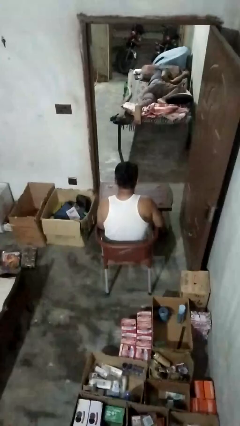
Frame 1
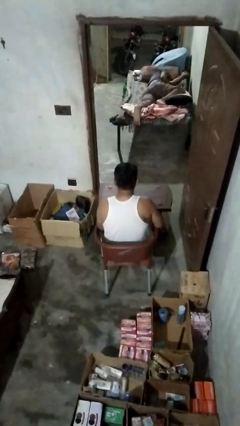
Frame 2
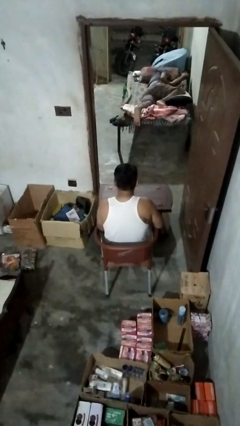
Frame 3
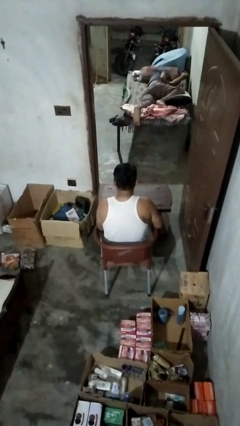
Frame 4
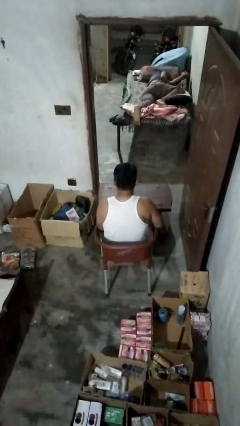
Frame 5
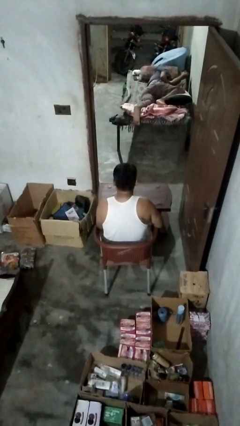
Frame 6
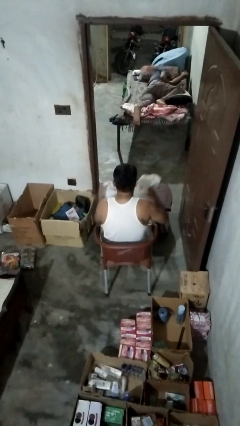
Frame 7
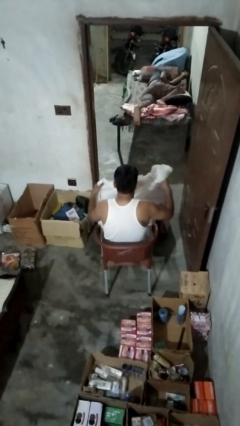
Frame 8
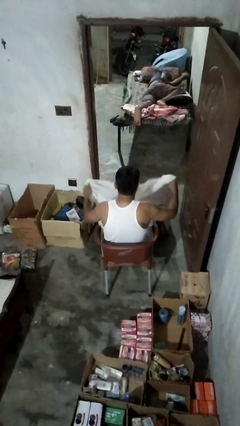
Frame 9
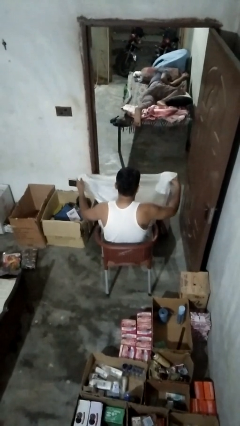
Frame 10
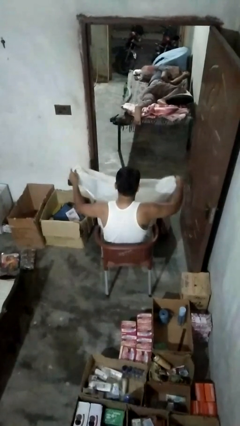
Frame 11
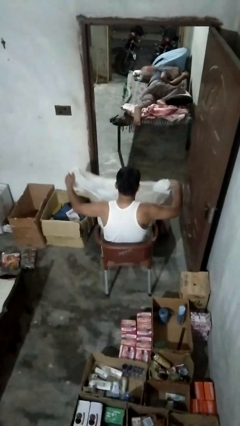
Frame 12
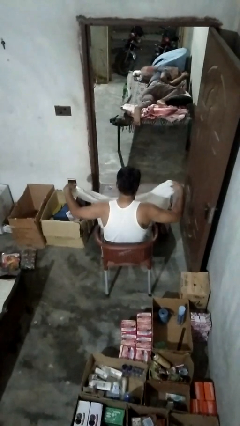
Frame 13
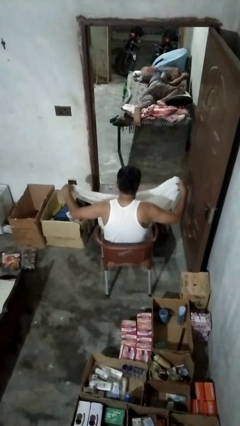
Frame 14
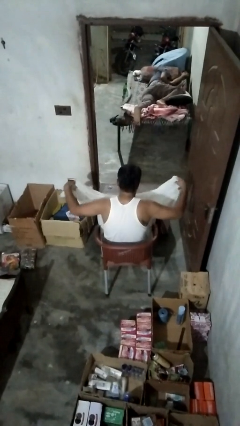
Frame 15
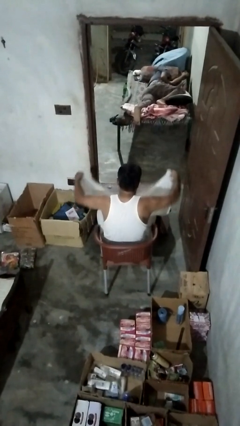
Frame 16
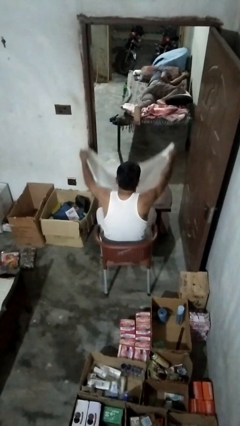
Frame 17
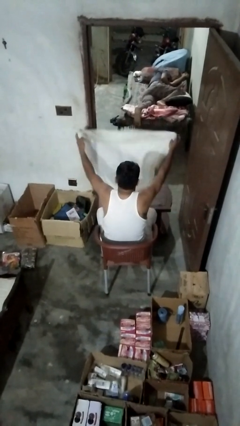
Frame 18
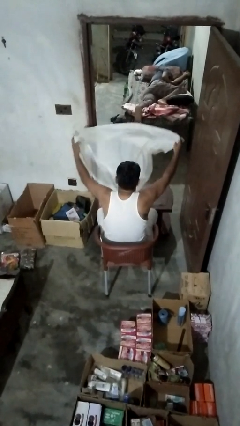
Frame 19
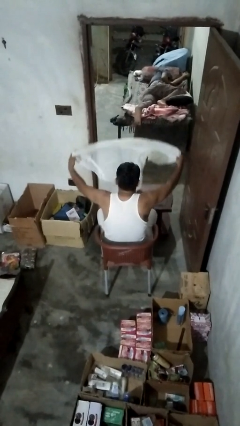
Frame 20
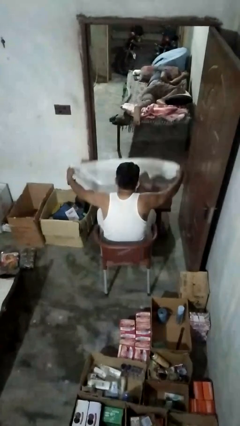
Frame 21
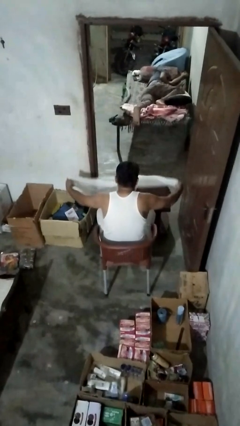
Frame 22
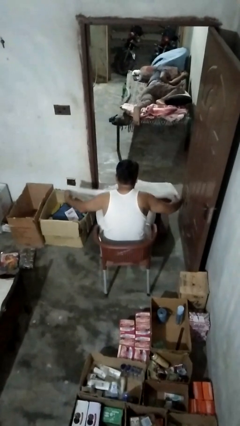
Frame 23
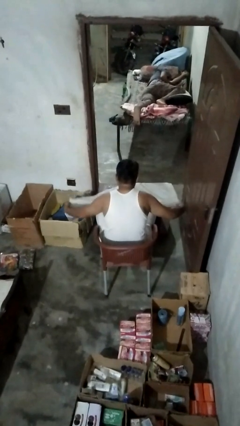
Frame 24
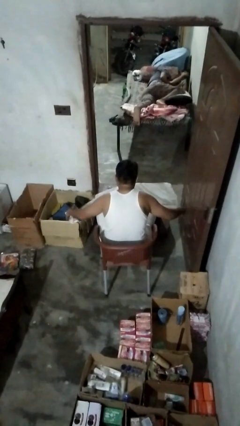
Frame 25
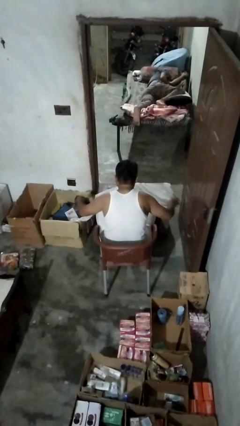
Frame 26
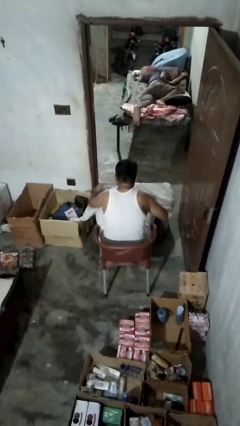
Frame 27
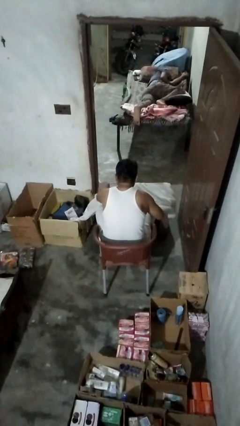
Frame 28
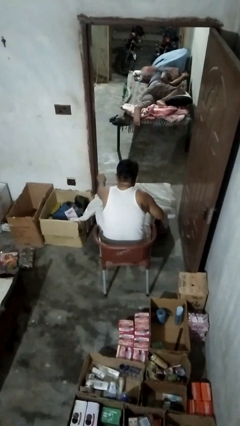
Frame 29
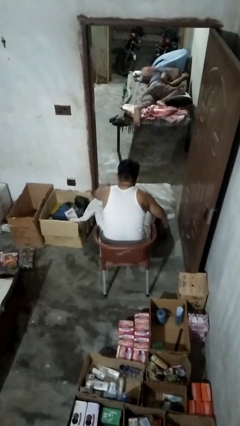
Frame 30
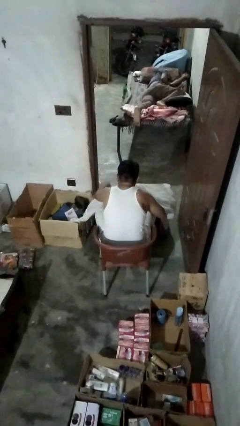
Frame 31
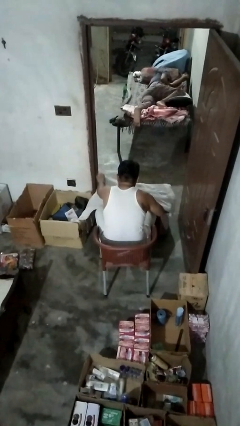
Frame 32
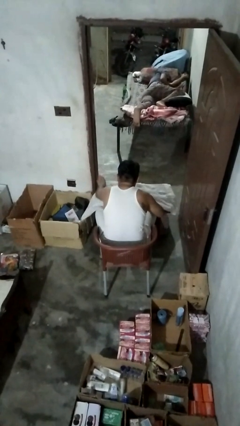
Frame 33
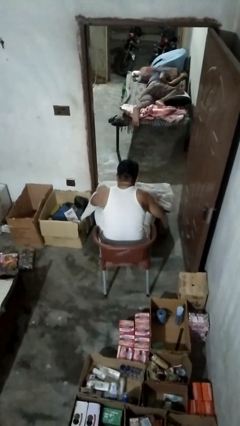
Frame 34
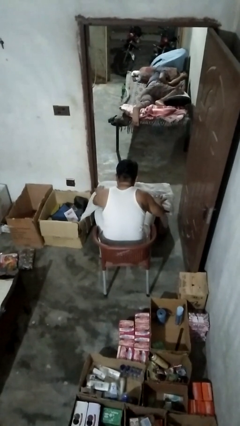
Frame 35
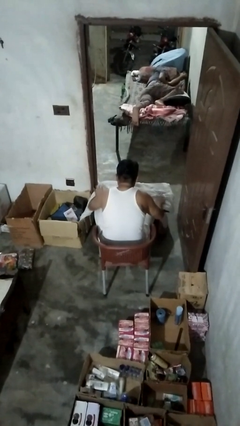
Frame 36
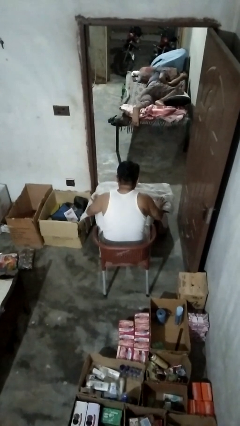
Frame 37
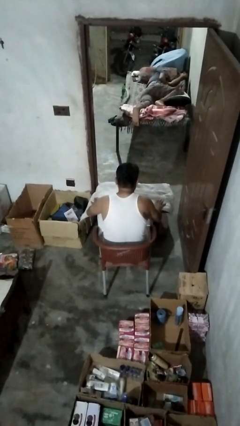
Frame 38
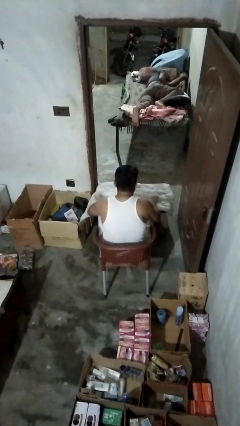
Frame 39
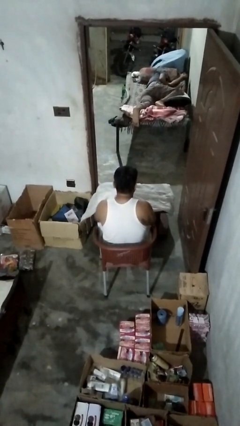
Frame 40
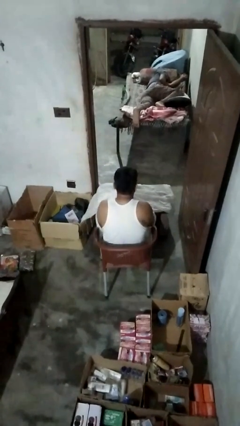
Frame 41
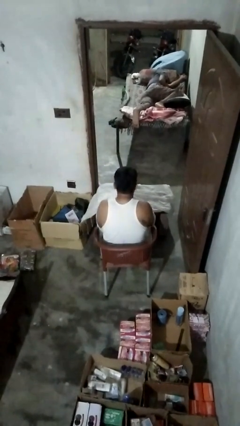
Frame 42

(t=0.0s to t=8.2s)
person spreads tablecloth

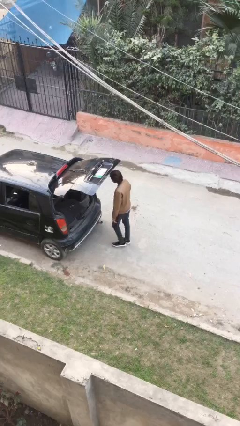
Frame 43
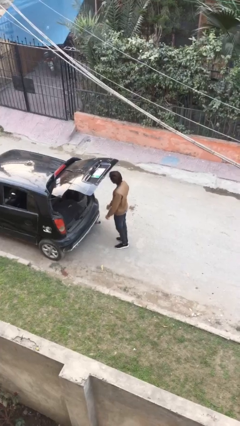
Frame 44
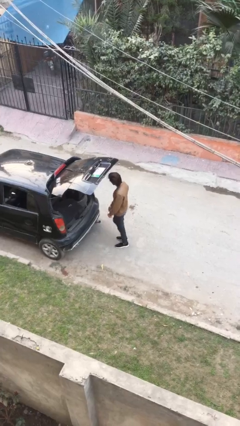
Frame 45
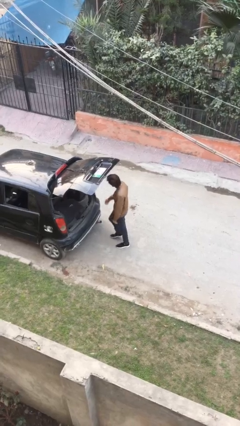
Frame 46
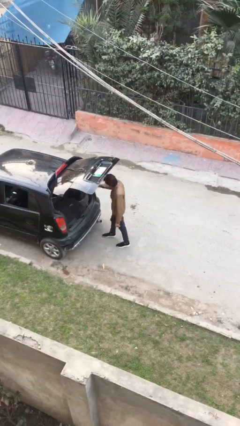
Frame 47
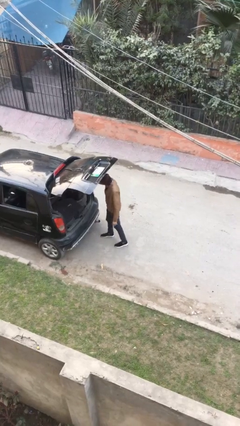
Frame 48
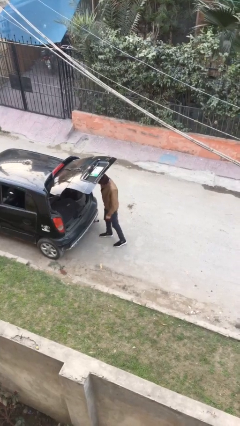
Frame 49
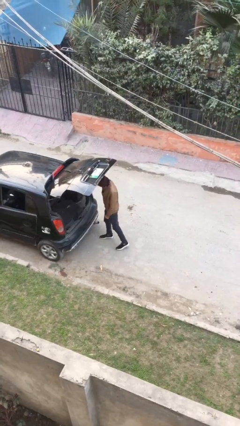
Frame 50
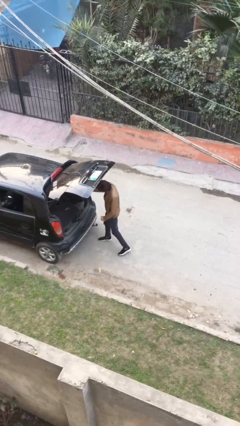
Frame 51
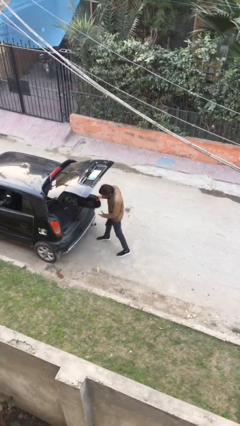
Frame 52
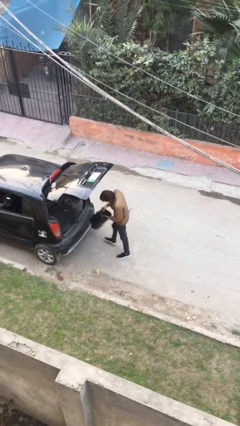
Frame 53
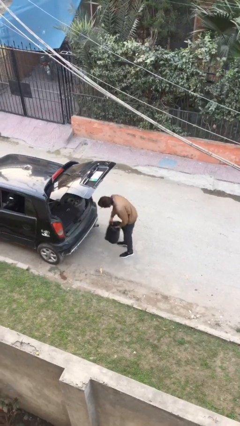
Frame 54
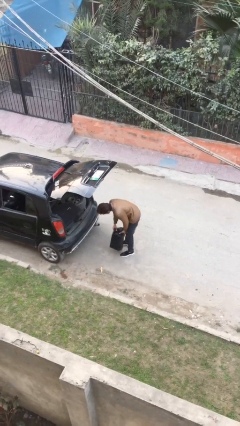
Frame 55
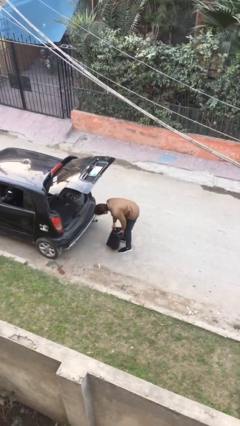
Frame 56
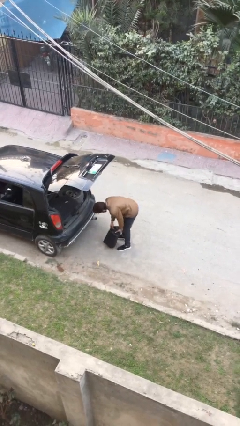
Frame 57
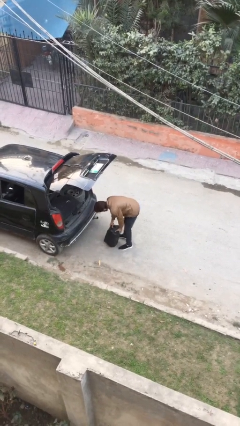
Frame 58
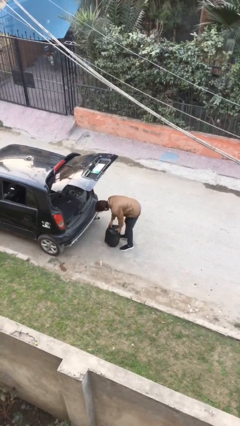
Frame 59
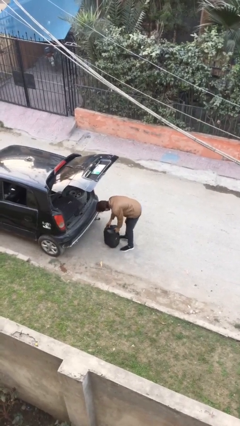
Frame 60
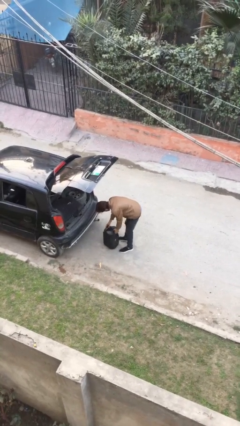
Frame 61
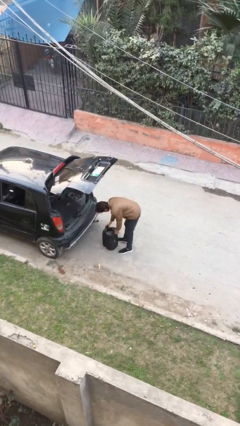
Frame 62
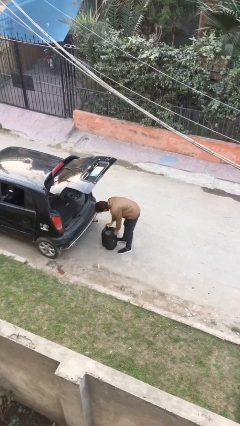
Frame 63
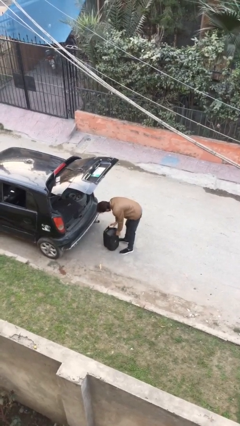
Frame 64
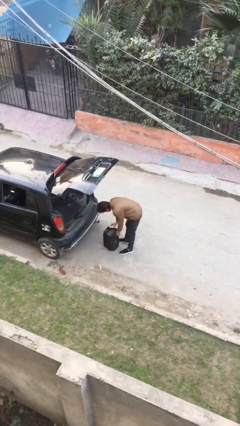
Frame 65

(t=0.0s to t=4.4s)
person unloads car

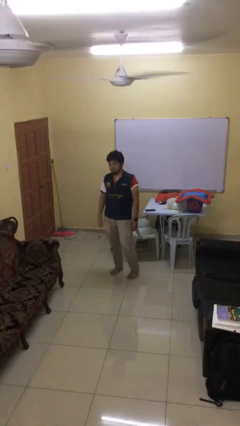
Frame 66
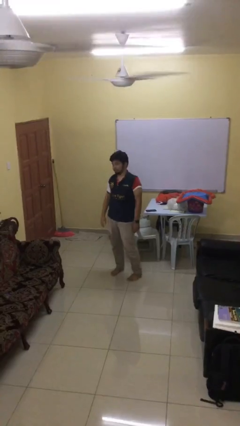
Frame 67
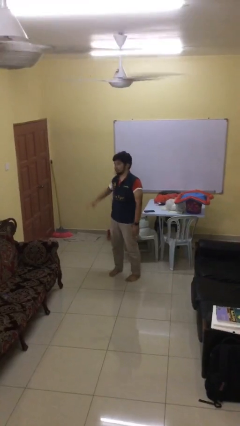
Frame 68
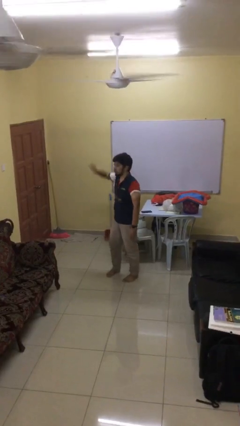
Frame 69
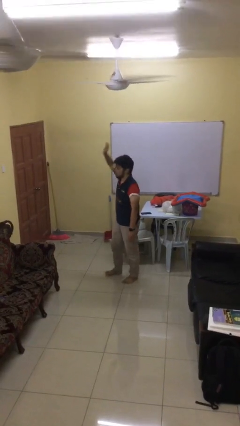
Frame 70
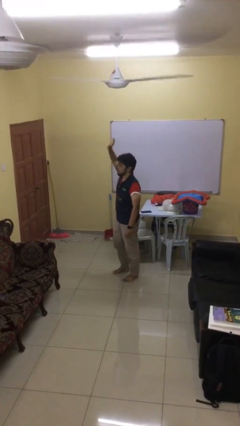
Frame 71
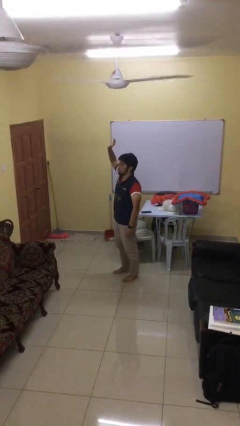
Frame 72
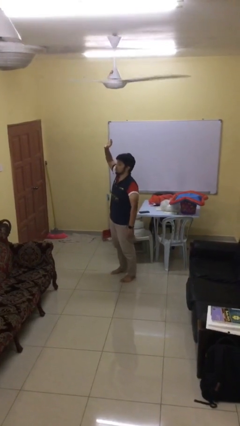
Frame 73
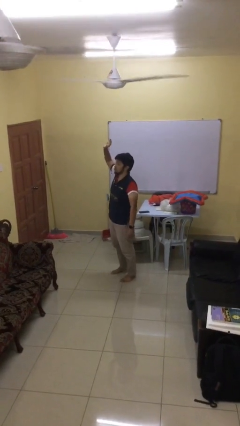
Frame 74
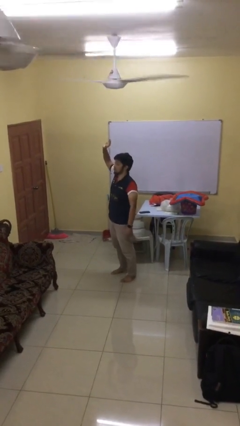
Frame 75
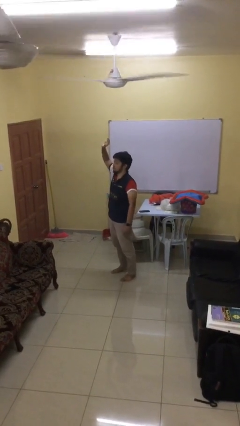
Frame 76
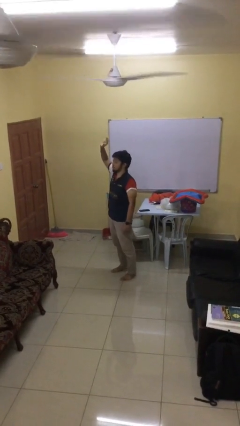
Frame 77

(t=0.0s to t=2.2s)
person gestures raise hand

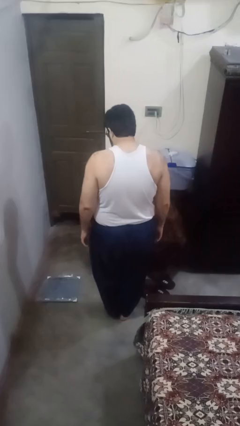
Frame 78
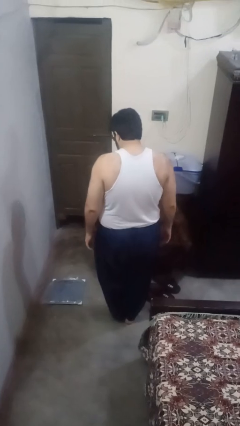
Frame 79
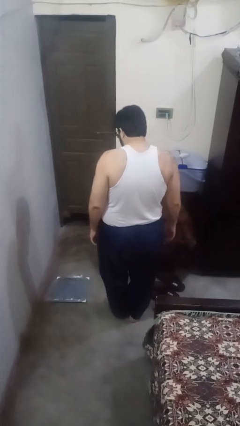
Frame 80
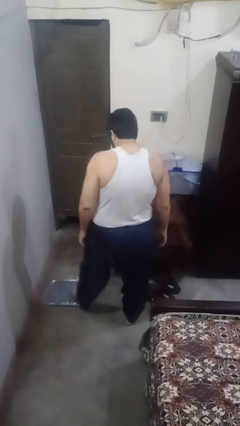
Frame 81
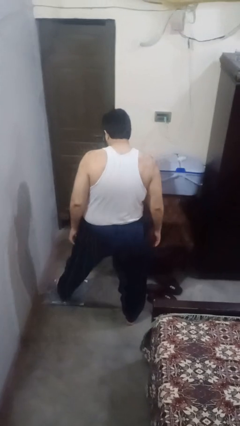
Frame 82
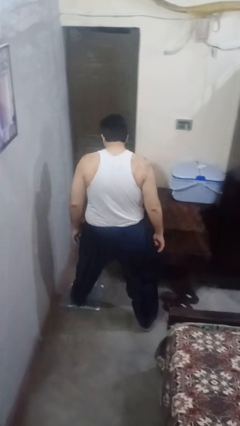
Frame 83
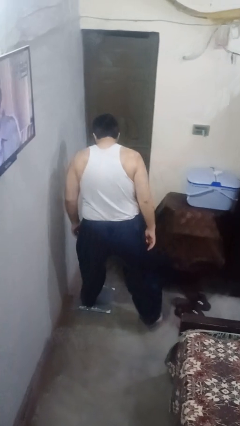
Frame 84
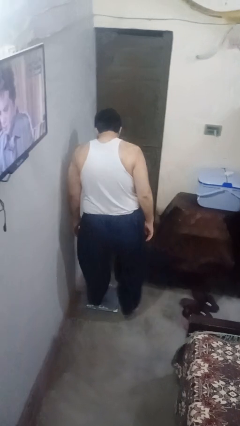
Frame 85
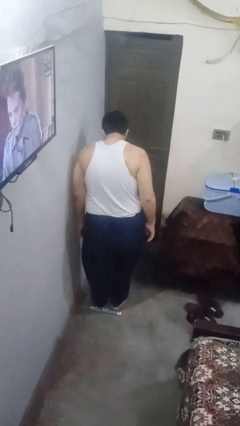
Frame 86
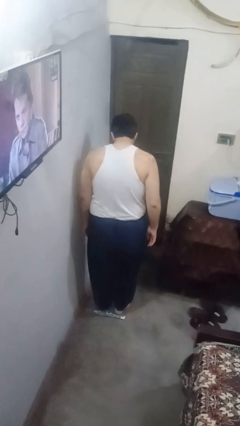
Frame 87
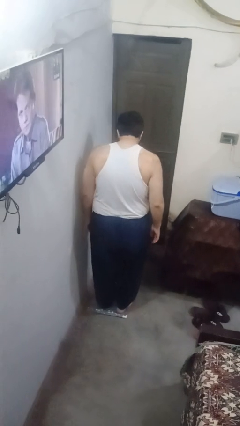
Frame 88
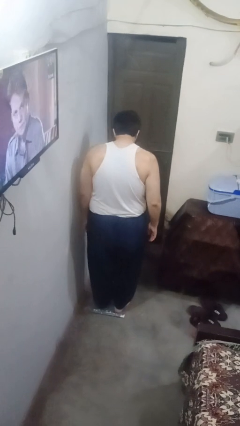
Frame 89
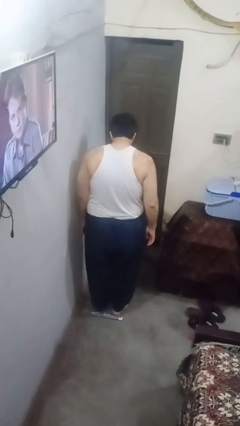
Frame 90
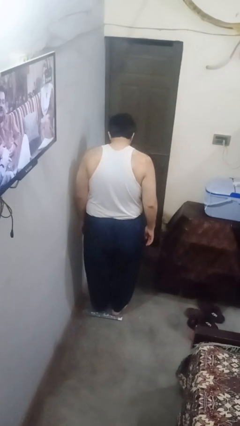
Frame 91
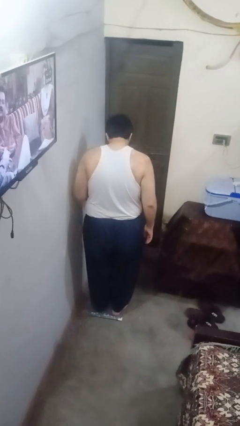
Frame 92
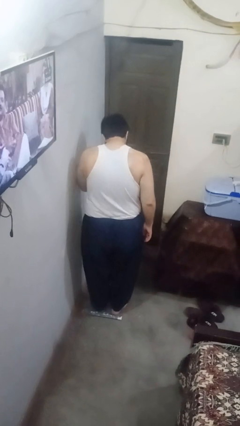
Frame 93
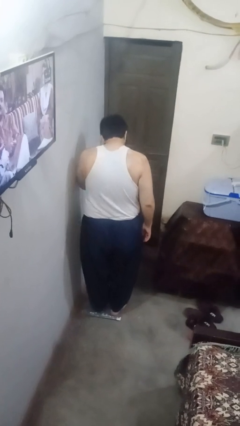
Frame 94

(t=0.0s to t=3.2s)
person uses bodyweight scale
